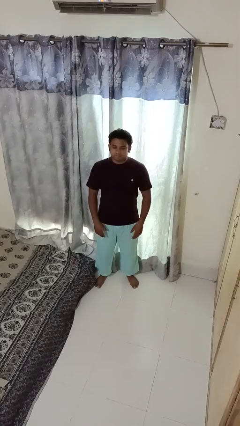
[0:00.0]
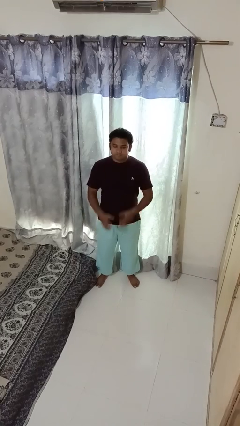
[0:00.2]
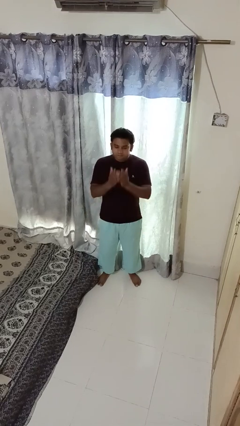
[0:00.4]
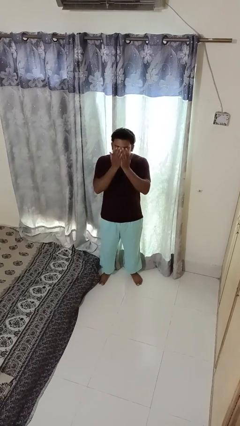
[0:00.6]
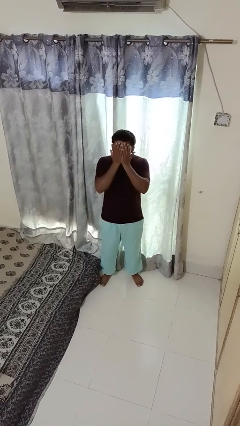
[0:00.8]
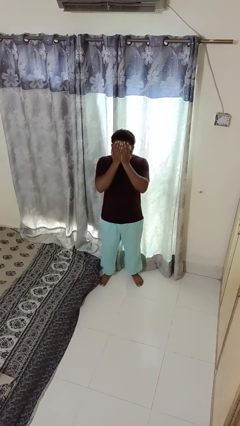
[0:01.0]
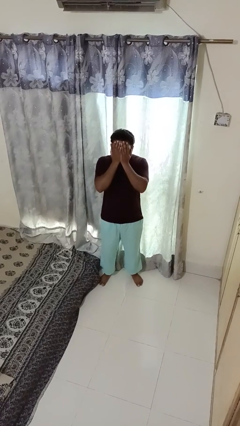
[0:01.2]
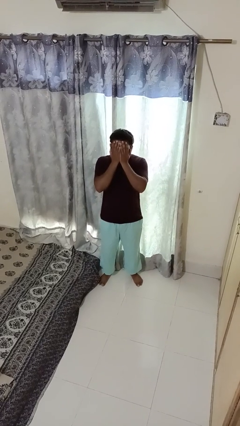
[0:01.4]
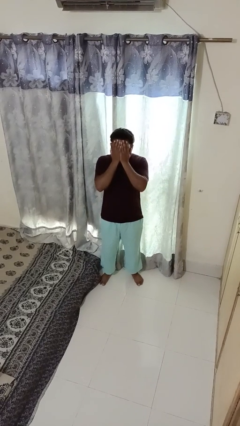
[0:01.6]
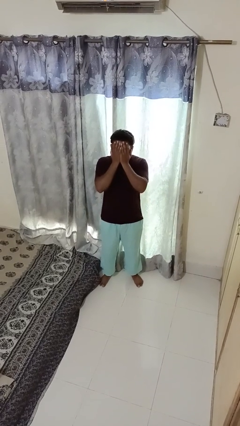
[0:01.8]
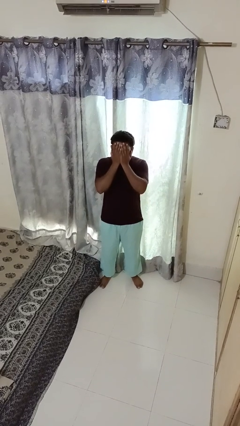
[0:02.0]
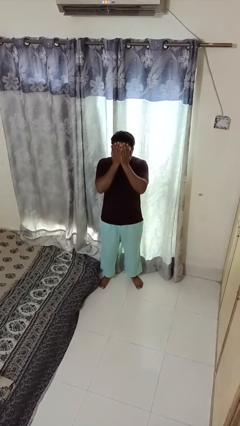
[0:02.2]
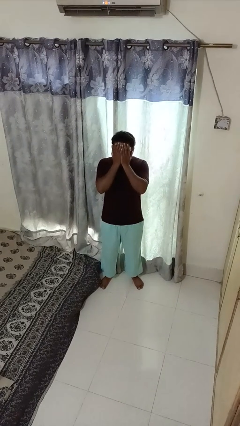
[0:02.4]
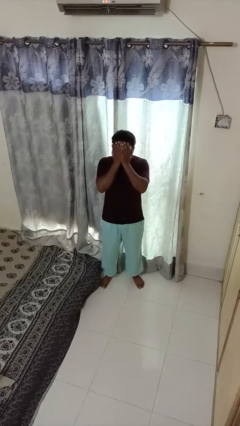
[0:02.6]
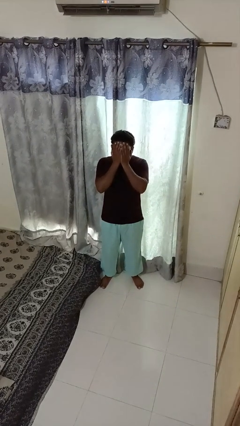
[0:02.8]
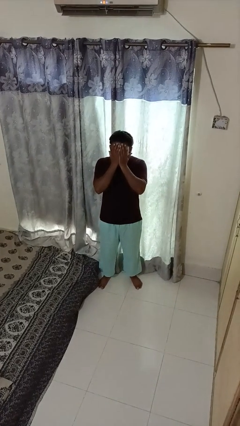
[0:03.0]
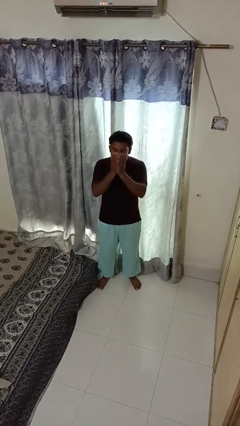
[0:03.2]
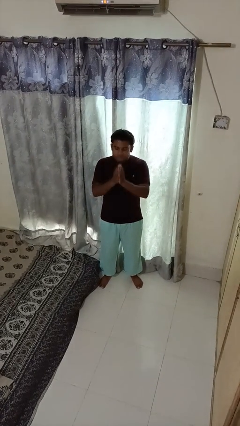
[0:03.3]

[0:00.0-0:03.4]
person covers face with hands

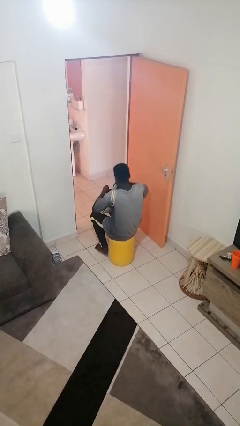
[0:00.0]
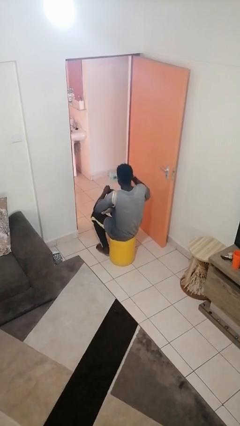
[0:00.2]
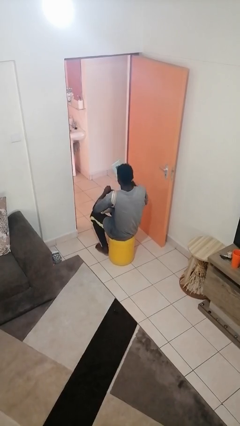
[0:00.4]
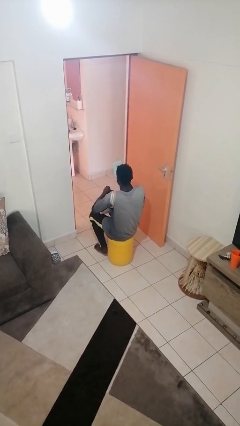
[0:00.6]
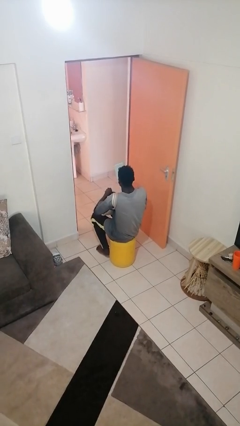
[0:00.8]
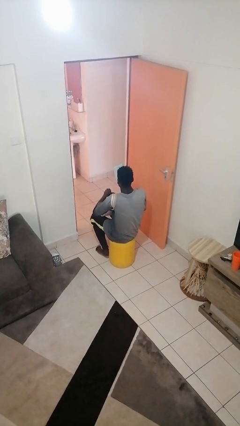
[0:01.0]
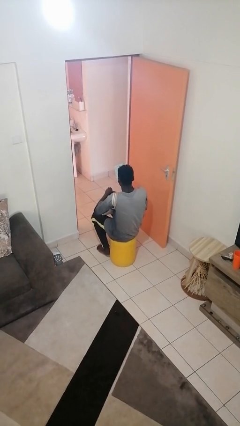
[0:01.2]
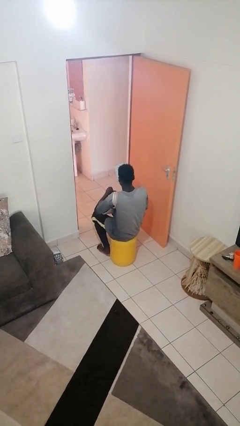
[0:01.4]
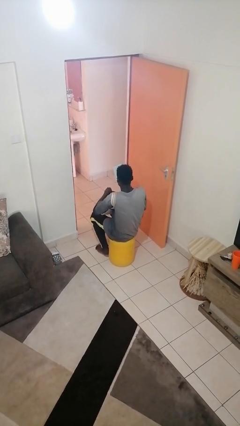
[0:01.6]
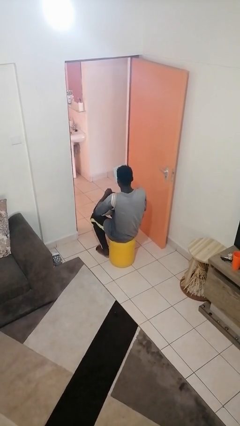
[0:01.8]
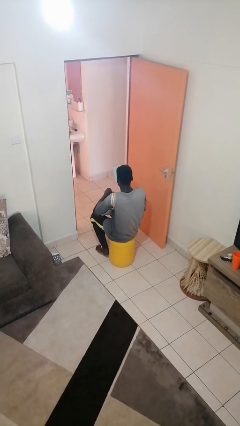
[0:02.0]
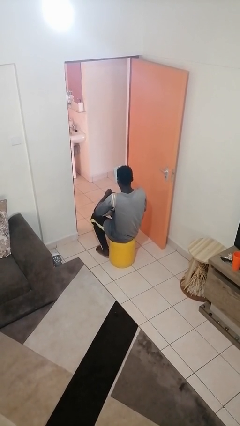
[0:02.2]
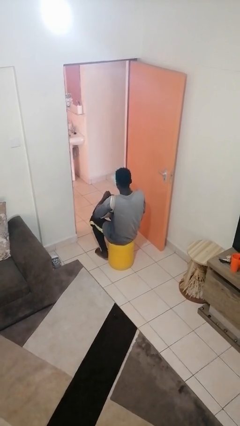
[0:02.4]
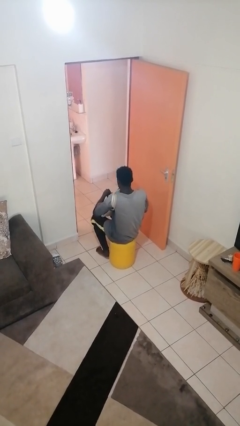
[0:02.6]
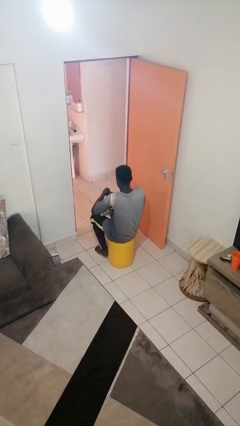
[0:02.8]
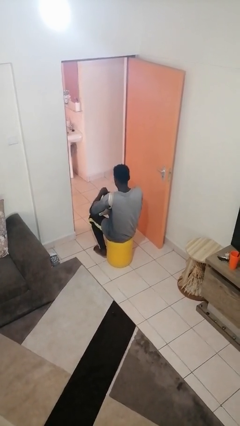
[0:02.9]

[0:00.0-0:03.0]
person takes object from purse

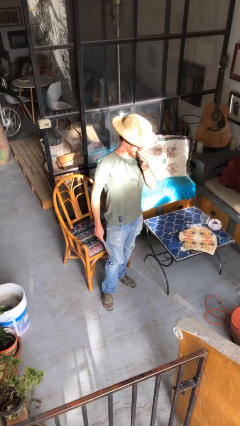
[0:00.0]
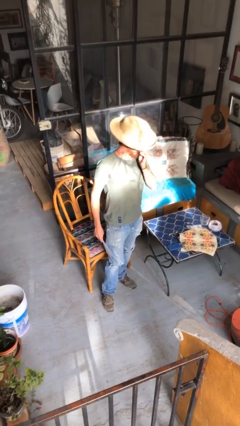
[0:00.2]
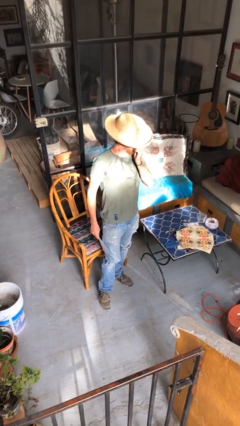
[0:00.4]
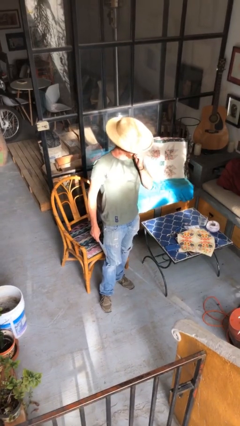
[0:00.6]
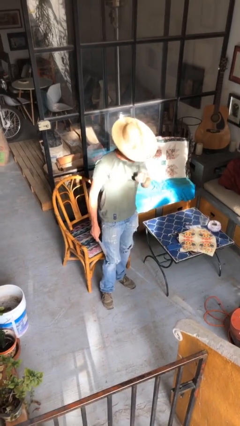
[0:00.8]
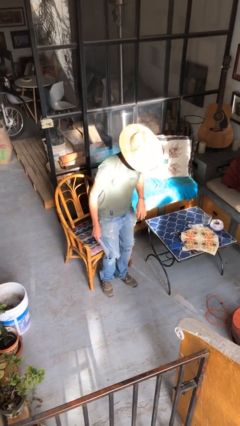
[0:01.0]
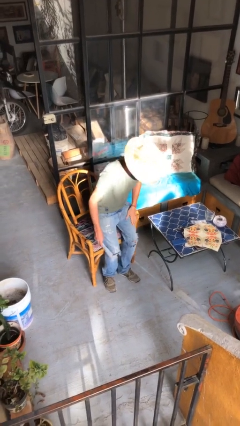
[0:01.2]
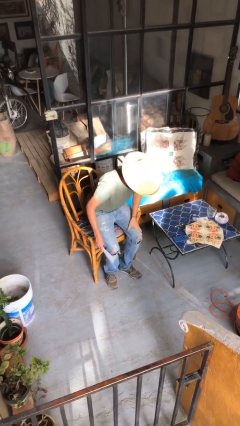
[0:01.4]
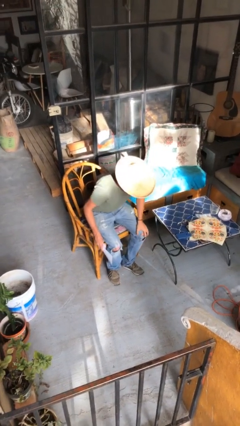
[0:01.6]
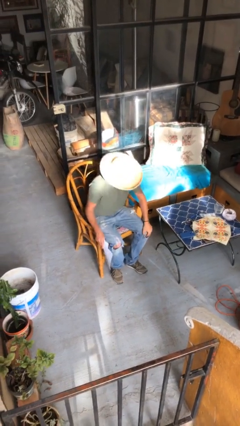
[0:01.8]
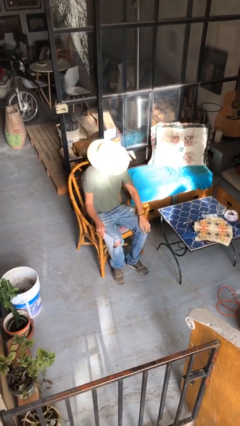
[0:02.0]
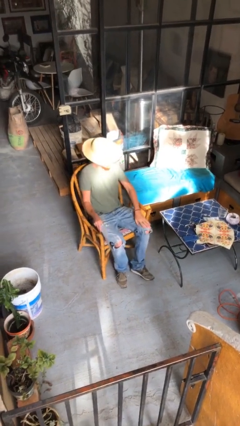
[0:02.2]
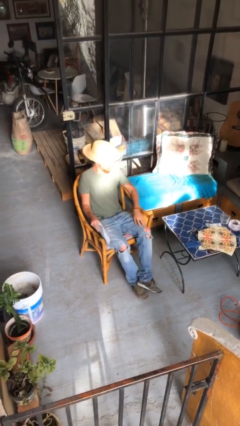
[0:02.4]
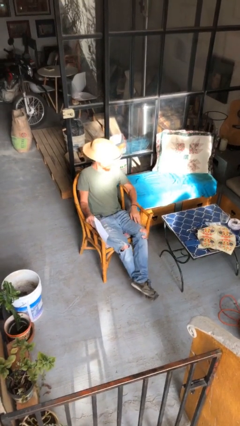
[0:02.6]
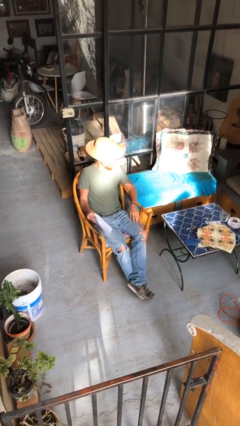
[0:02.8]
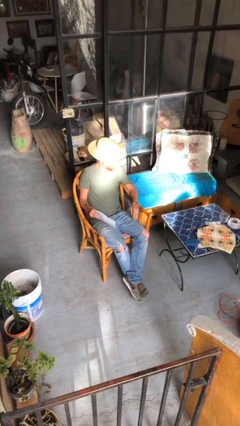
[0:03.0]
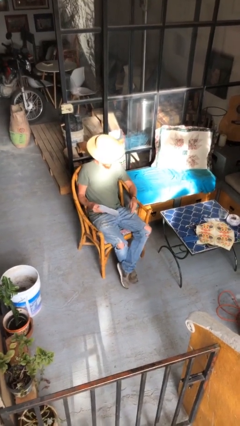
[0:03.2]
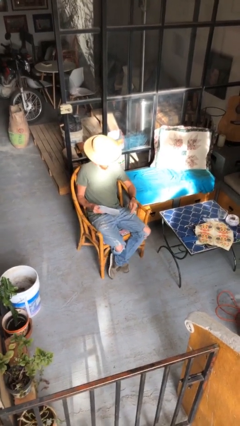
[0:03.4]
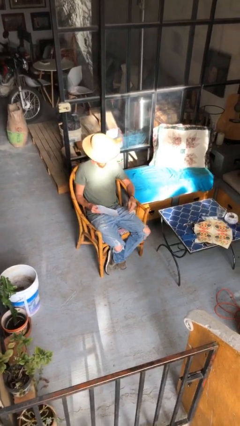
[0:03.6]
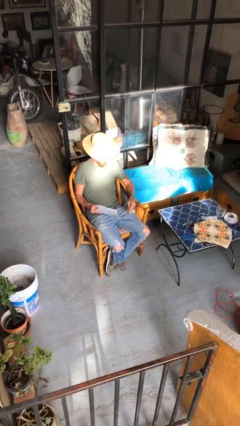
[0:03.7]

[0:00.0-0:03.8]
person sits down

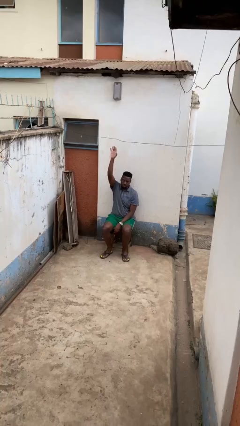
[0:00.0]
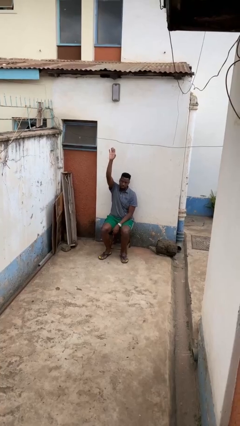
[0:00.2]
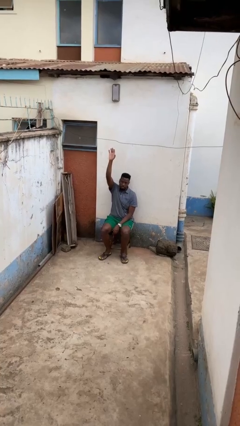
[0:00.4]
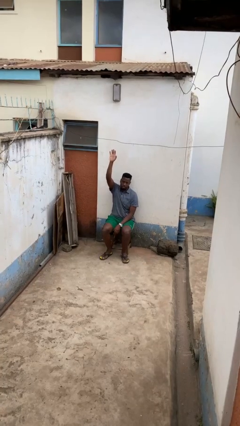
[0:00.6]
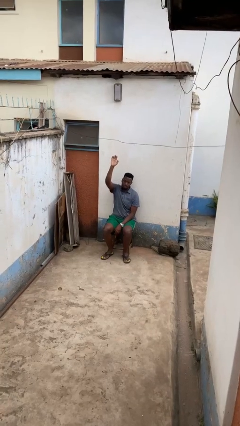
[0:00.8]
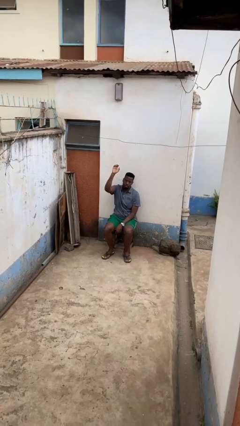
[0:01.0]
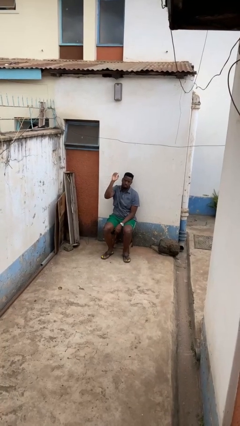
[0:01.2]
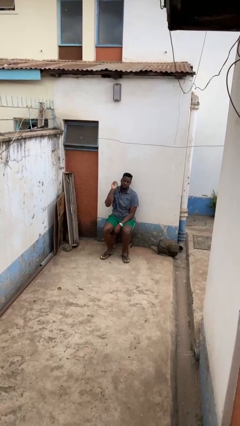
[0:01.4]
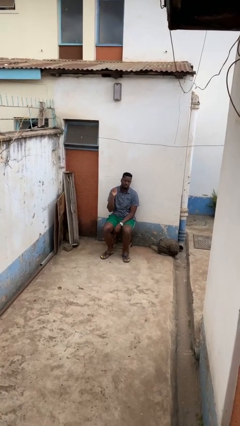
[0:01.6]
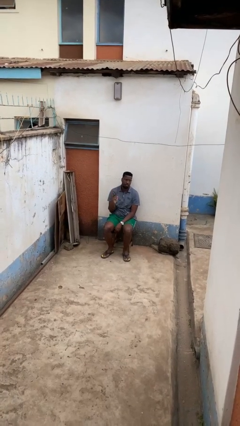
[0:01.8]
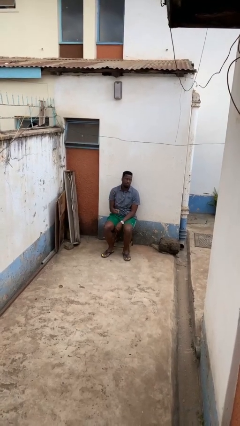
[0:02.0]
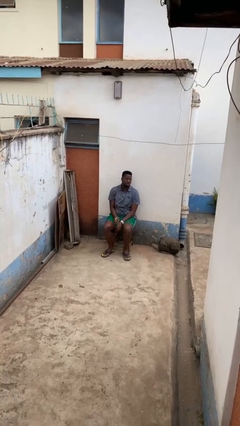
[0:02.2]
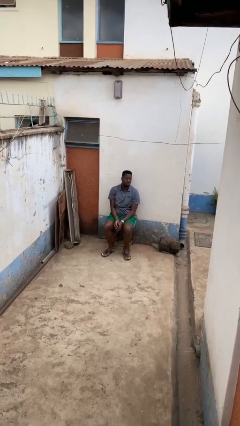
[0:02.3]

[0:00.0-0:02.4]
person gestures lower hand

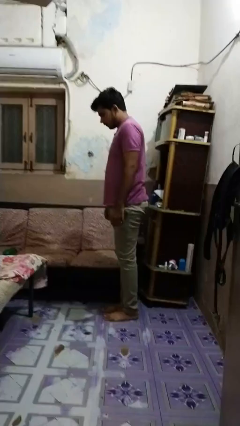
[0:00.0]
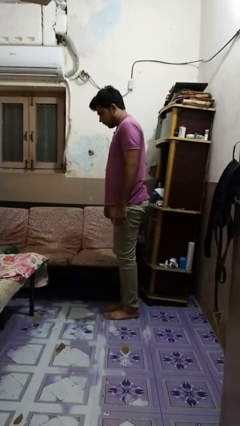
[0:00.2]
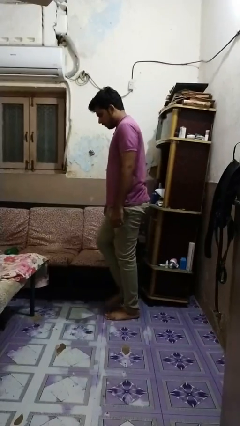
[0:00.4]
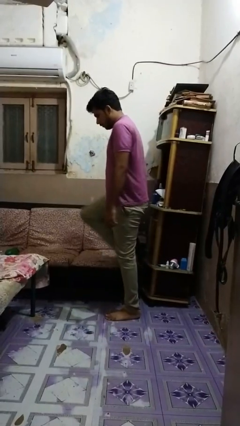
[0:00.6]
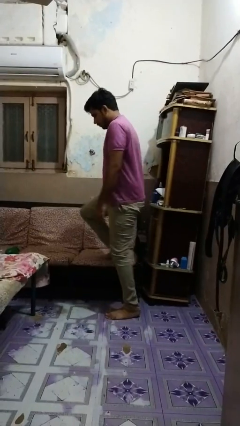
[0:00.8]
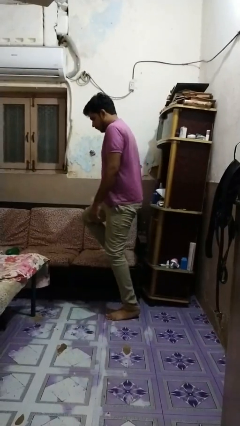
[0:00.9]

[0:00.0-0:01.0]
person climbs off couch

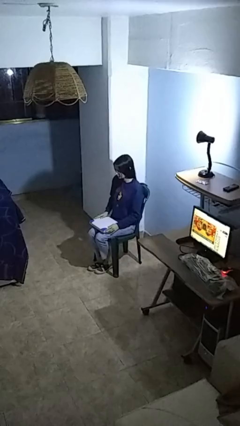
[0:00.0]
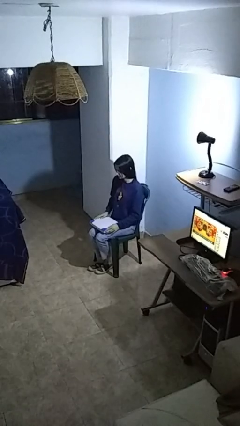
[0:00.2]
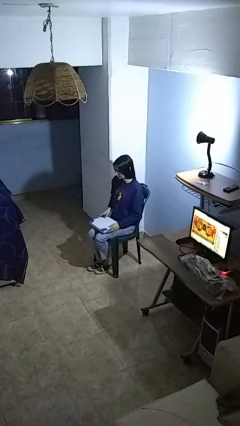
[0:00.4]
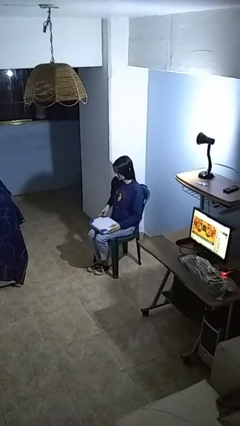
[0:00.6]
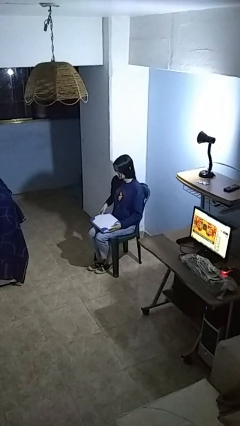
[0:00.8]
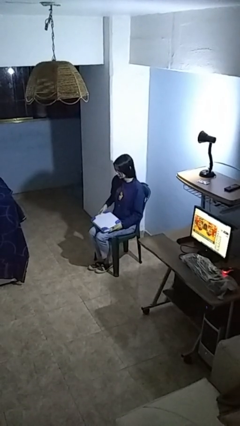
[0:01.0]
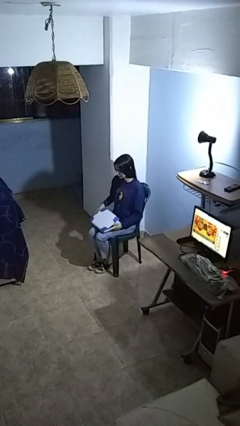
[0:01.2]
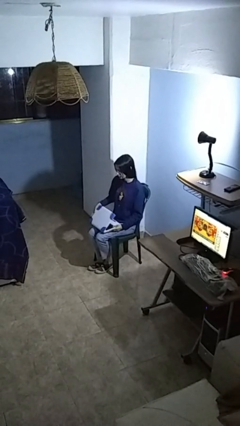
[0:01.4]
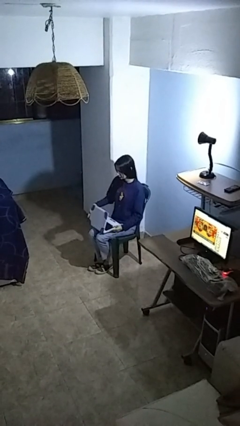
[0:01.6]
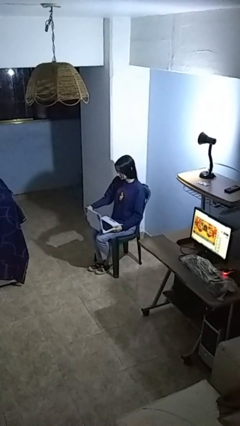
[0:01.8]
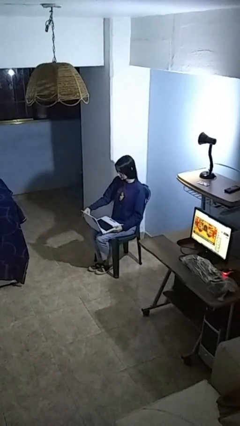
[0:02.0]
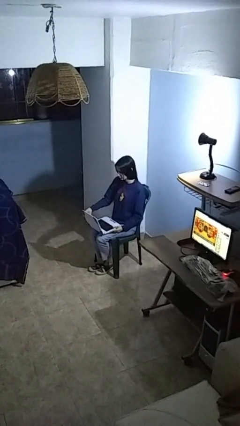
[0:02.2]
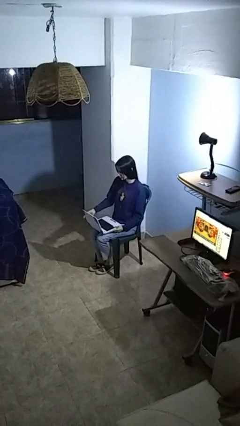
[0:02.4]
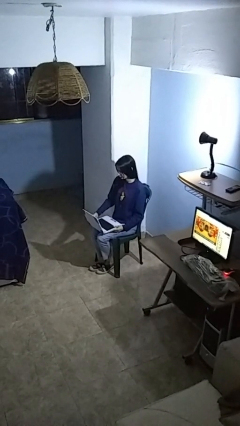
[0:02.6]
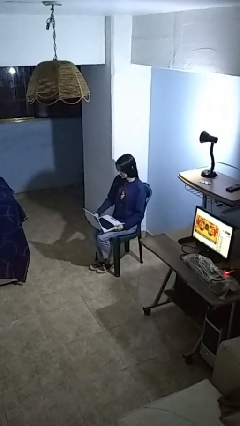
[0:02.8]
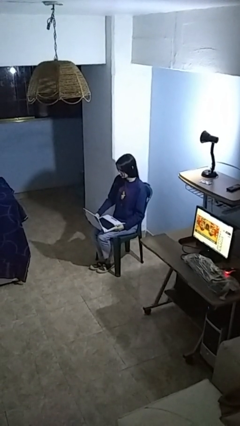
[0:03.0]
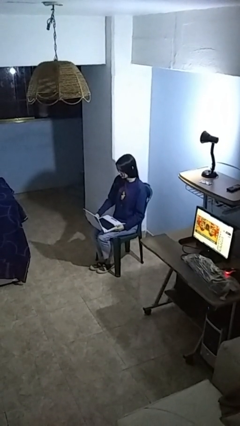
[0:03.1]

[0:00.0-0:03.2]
person opens laptop

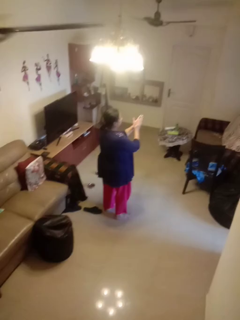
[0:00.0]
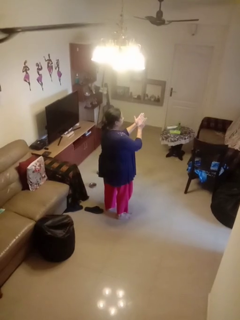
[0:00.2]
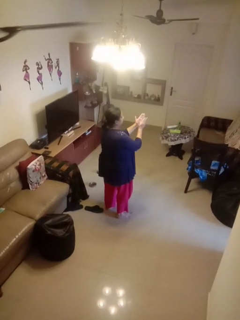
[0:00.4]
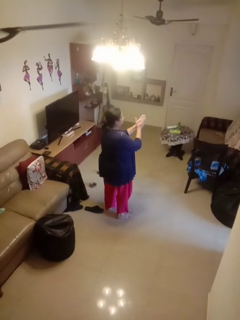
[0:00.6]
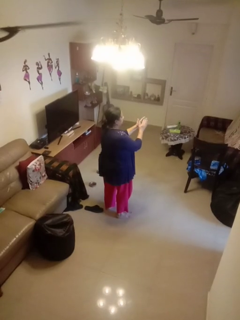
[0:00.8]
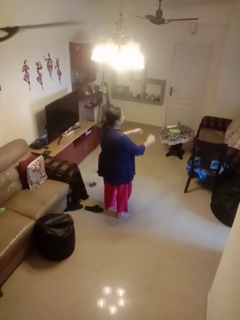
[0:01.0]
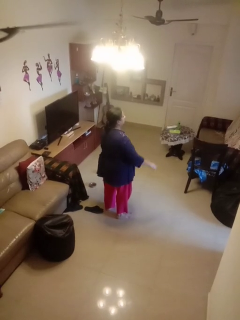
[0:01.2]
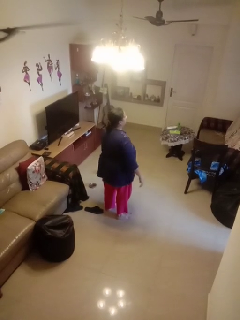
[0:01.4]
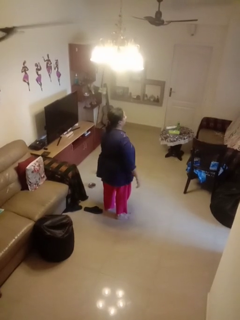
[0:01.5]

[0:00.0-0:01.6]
person claps hands
